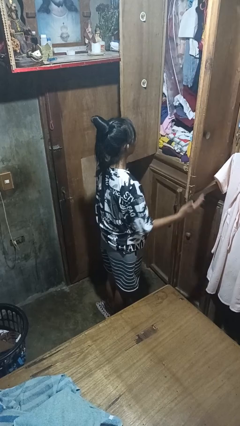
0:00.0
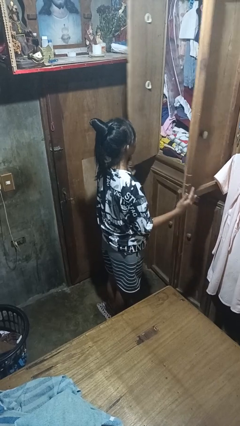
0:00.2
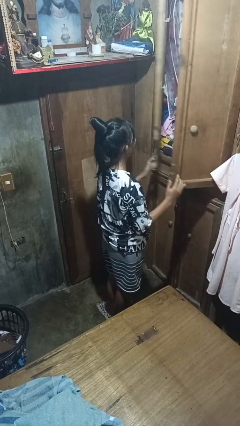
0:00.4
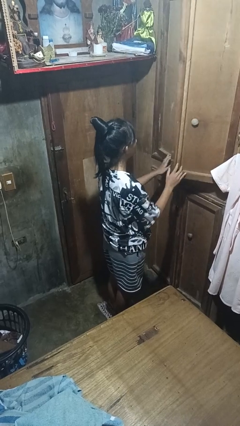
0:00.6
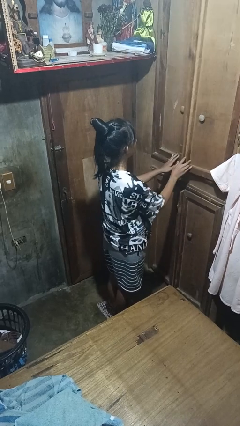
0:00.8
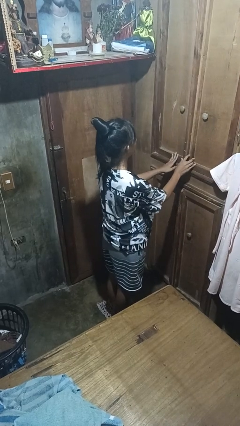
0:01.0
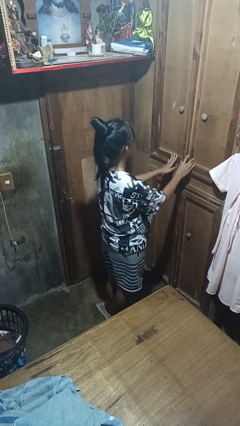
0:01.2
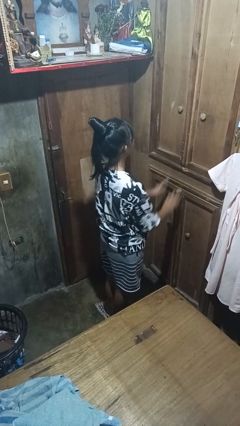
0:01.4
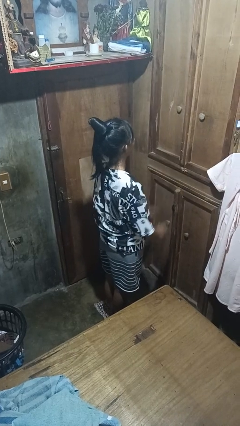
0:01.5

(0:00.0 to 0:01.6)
person closes closet door

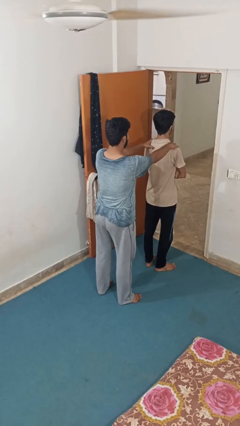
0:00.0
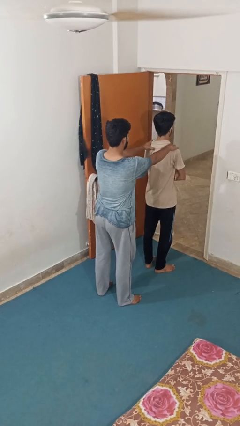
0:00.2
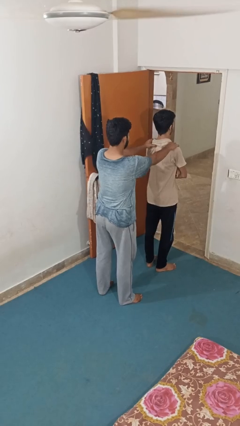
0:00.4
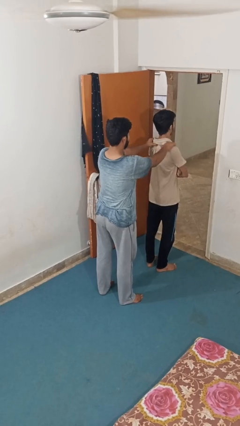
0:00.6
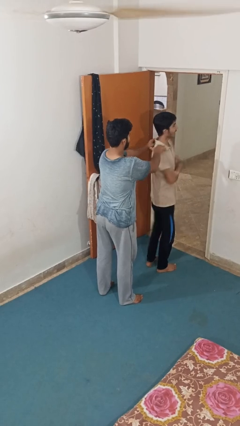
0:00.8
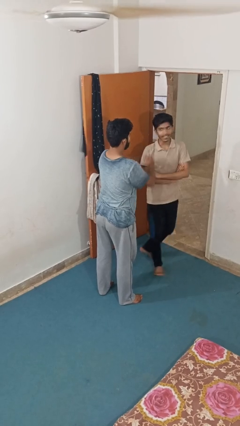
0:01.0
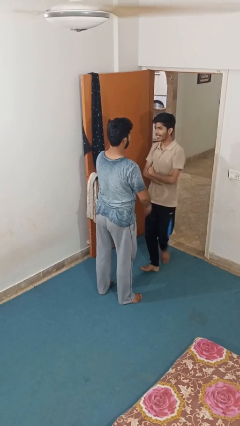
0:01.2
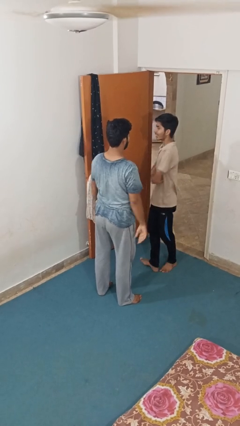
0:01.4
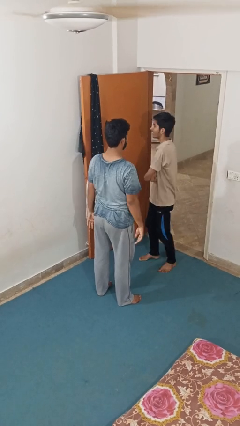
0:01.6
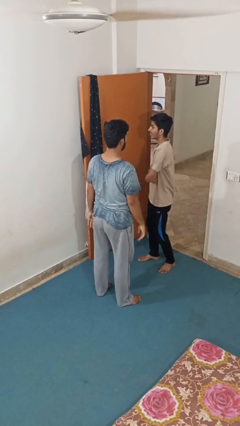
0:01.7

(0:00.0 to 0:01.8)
person spins person around

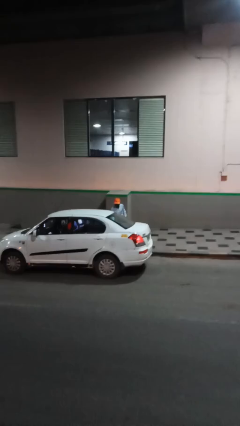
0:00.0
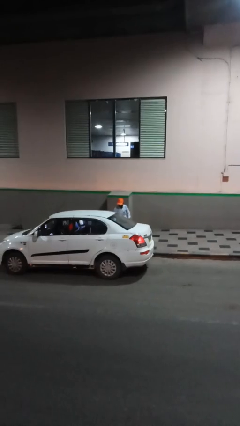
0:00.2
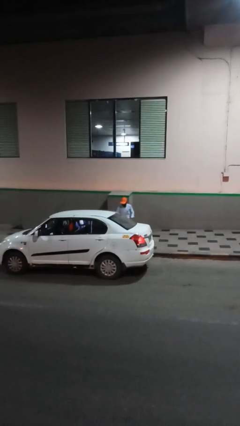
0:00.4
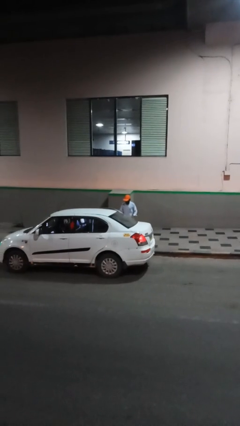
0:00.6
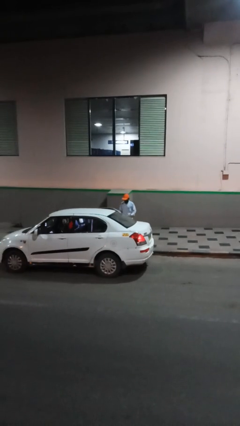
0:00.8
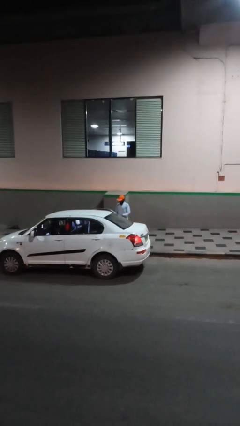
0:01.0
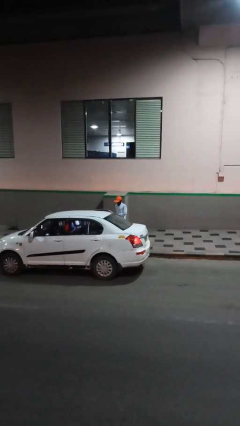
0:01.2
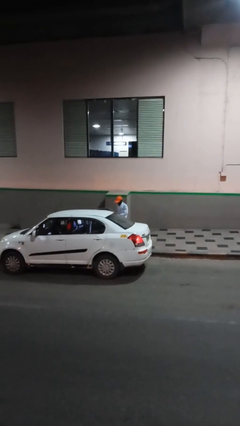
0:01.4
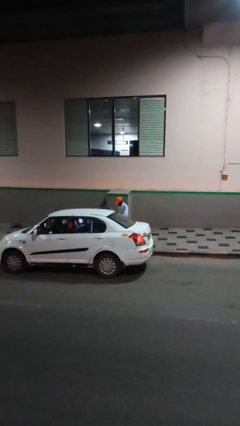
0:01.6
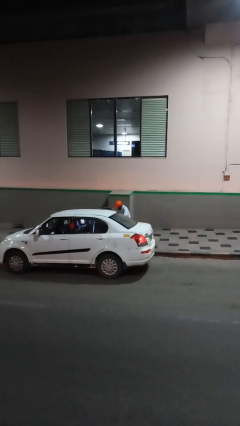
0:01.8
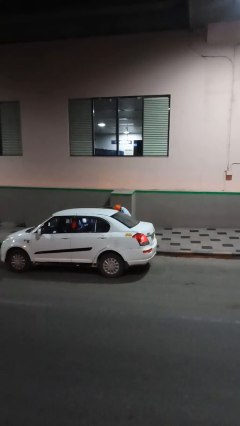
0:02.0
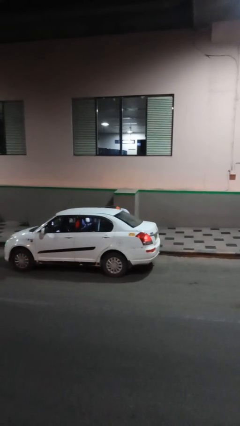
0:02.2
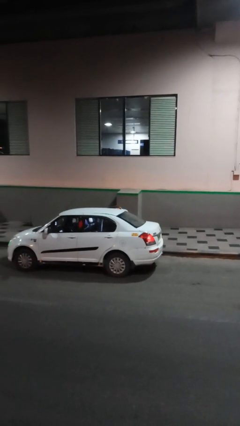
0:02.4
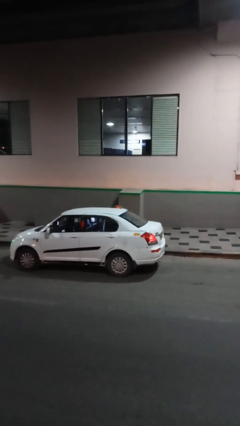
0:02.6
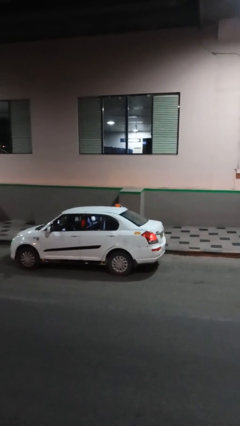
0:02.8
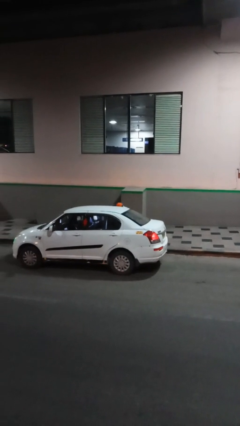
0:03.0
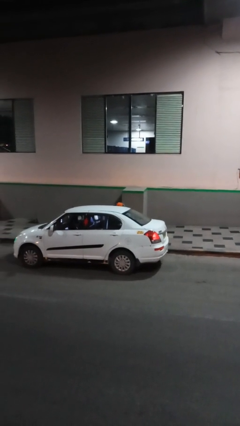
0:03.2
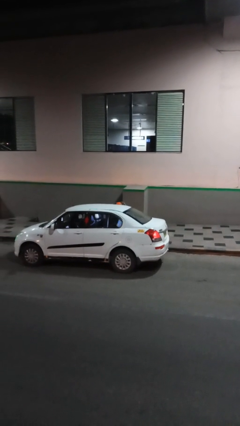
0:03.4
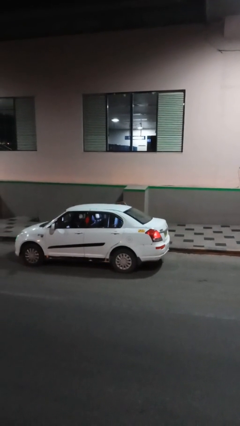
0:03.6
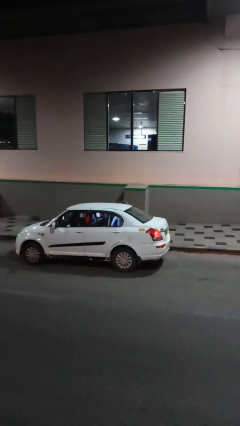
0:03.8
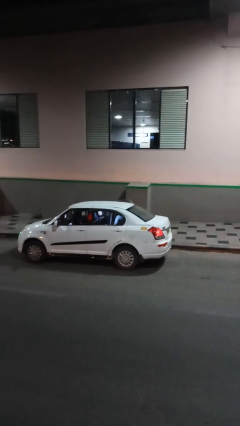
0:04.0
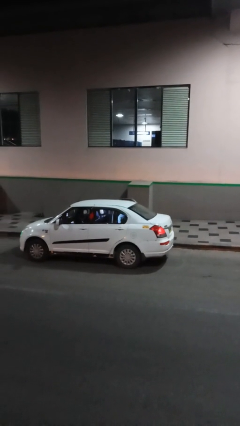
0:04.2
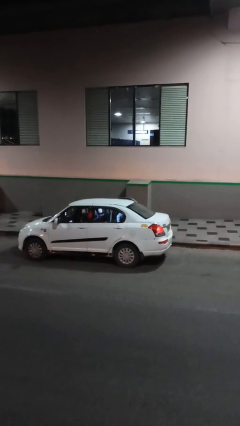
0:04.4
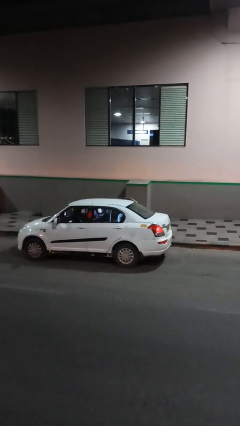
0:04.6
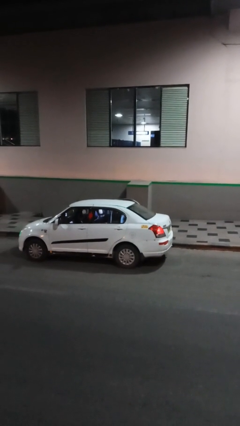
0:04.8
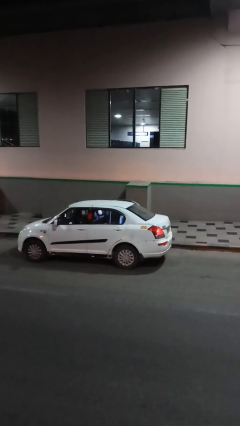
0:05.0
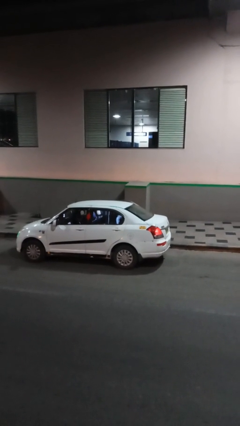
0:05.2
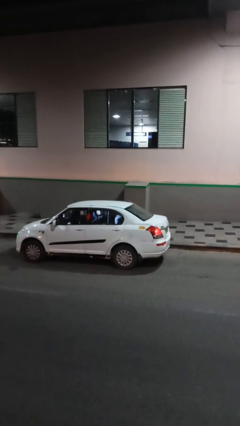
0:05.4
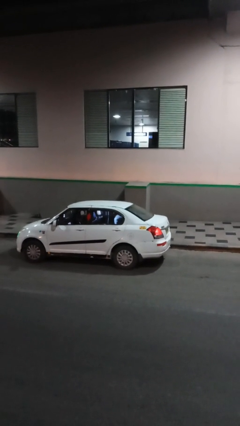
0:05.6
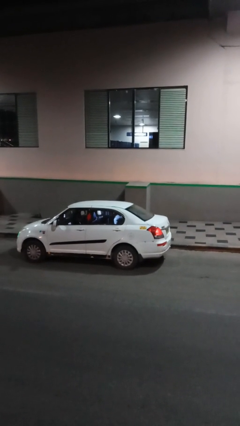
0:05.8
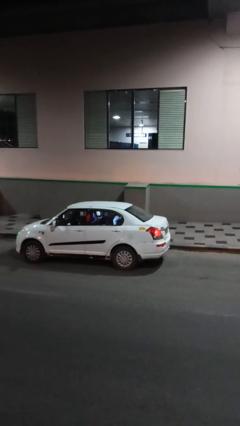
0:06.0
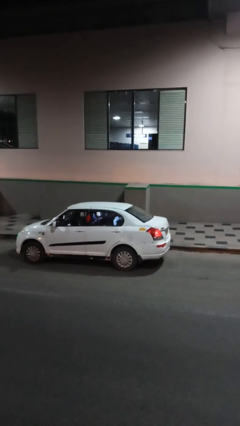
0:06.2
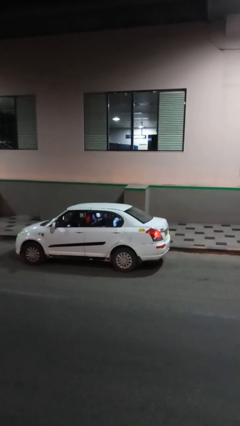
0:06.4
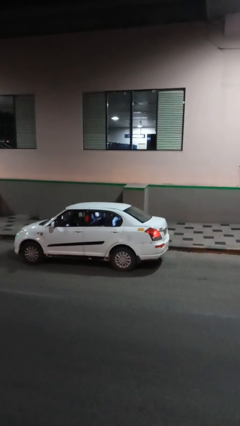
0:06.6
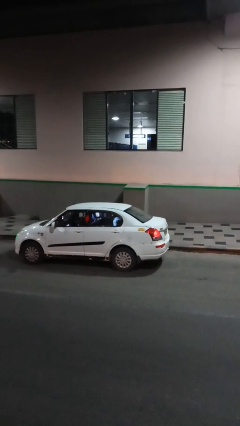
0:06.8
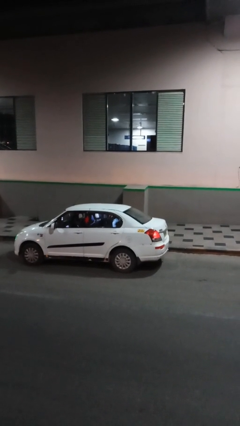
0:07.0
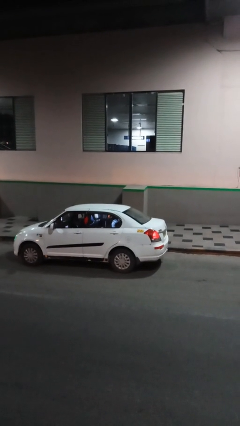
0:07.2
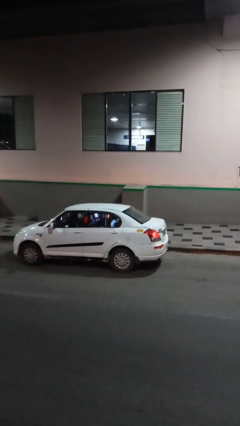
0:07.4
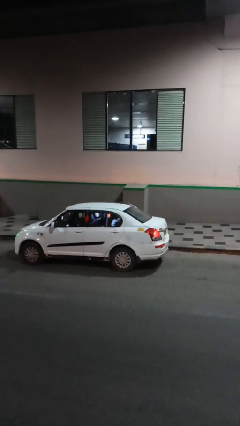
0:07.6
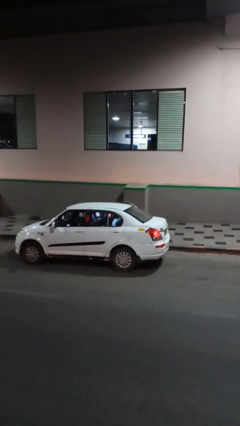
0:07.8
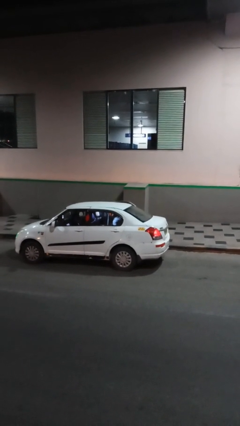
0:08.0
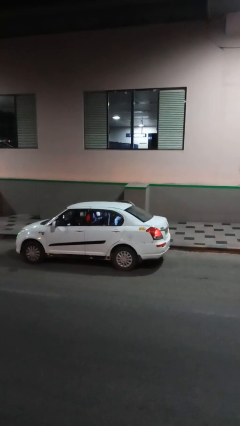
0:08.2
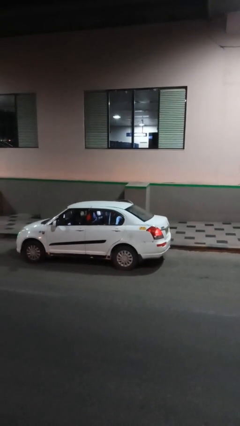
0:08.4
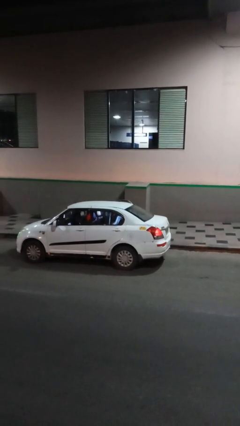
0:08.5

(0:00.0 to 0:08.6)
person enters car

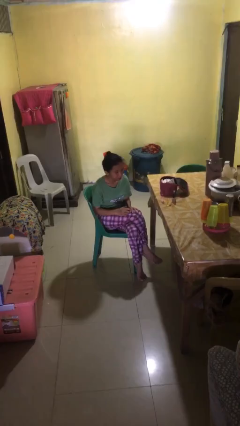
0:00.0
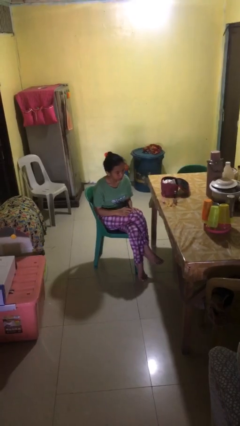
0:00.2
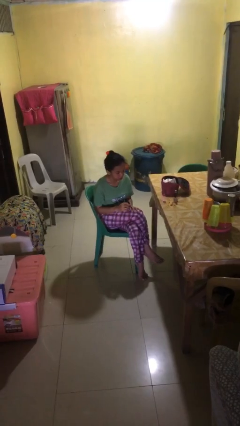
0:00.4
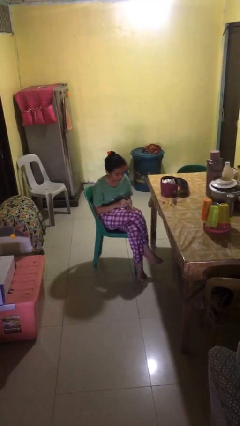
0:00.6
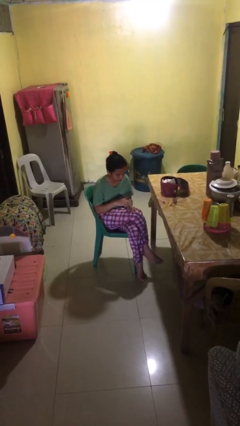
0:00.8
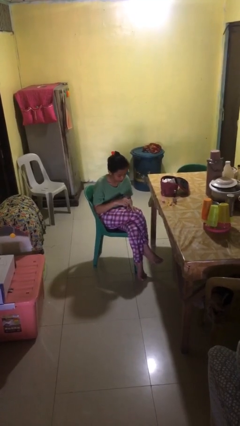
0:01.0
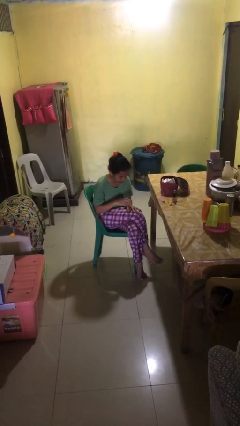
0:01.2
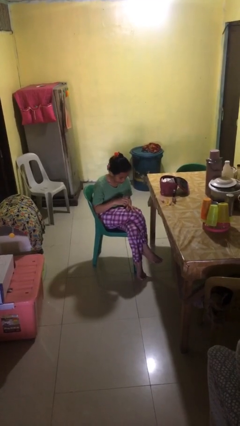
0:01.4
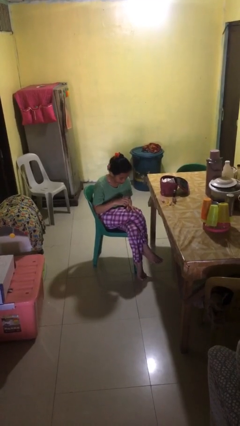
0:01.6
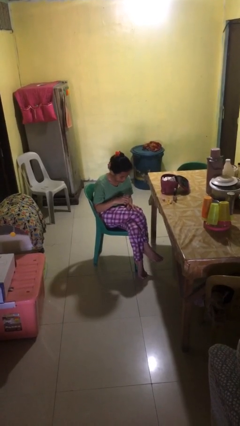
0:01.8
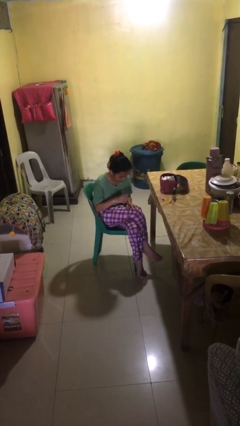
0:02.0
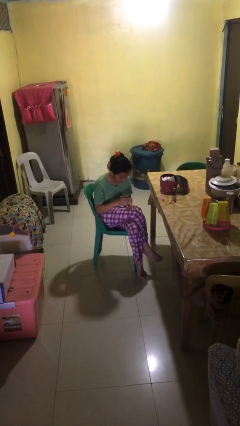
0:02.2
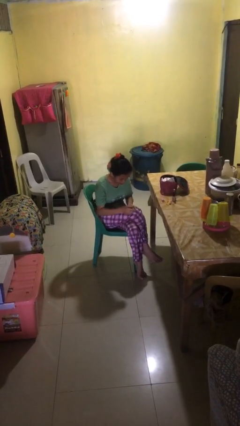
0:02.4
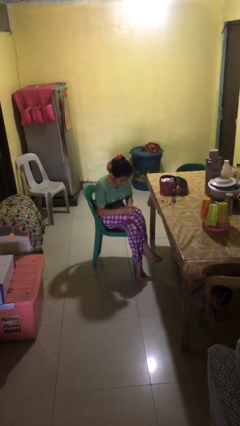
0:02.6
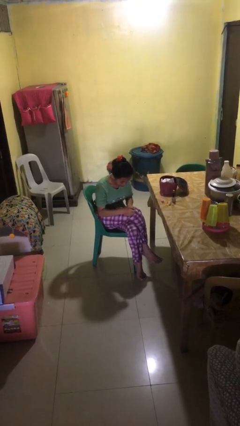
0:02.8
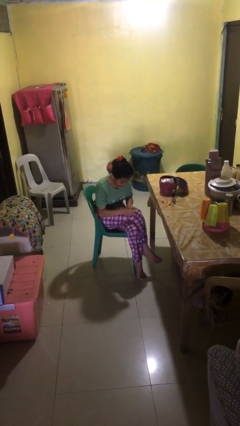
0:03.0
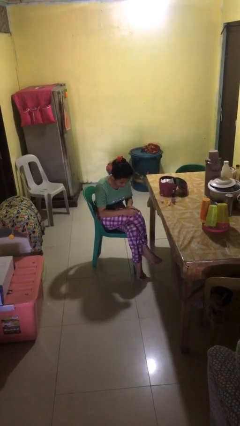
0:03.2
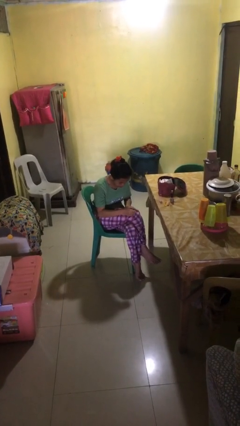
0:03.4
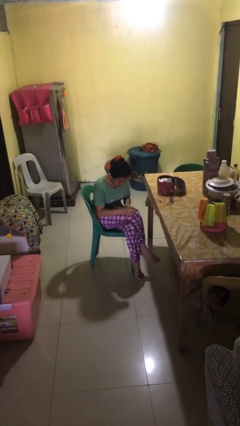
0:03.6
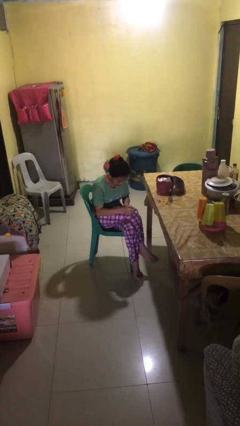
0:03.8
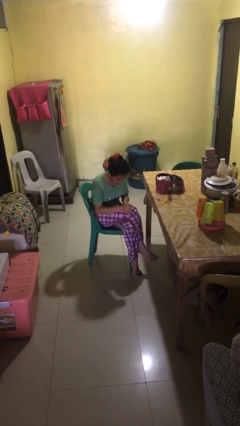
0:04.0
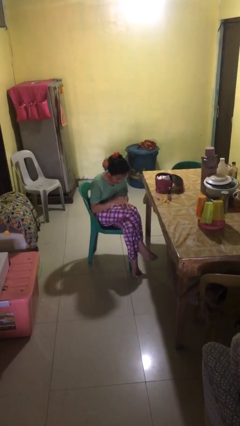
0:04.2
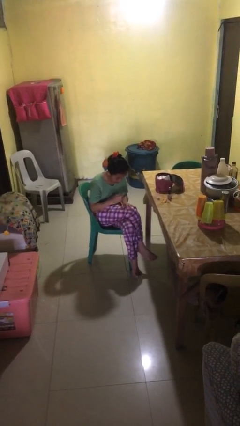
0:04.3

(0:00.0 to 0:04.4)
person paints fingernails

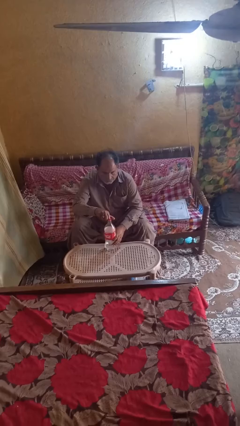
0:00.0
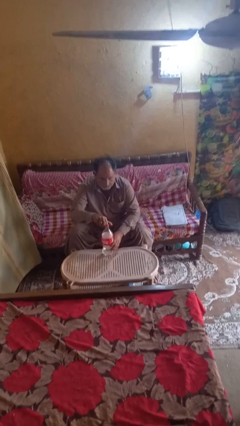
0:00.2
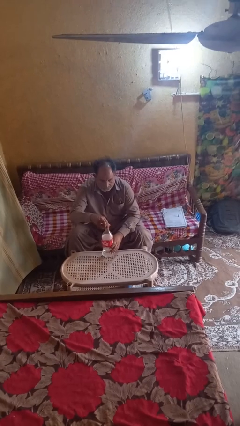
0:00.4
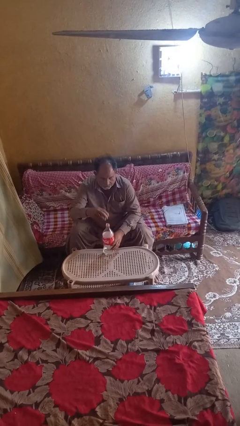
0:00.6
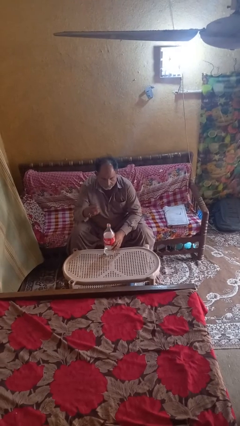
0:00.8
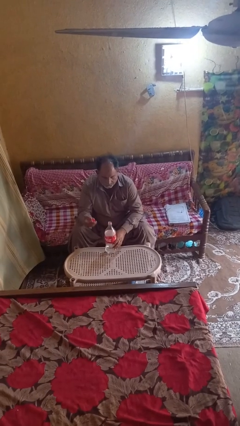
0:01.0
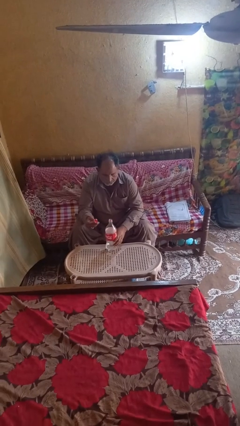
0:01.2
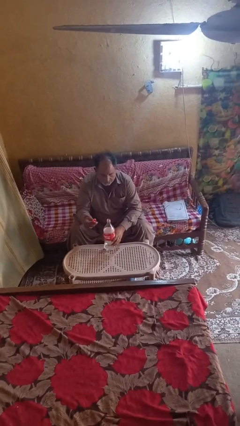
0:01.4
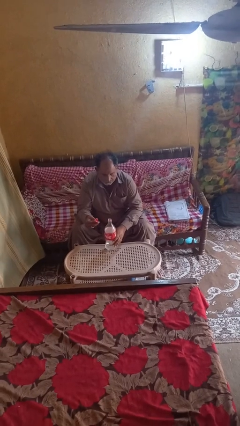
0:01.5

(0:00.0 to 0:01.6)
person unscrews lid from bottle
